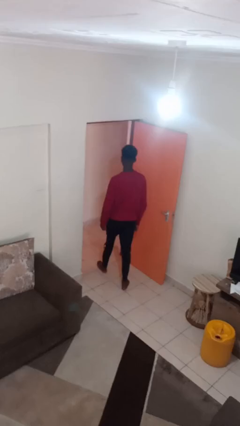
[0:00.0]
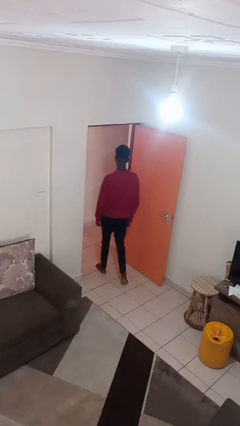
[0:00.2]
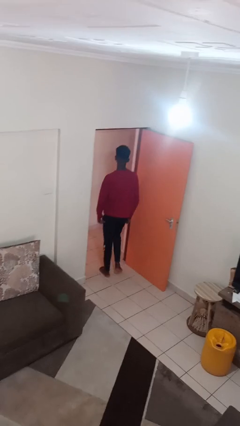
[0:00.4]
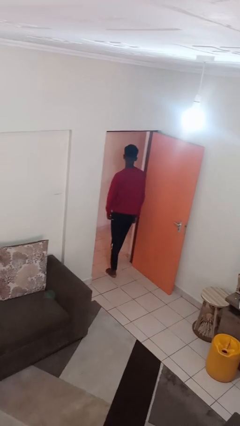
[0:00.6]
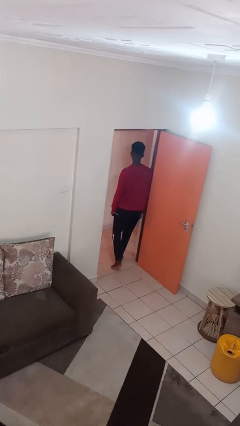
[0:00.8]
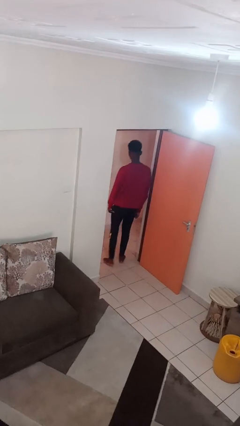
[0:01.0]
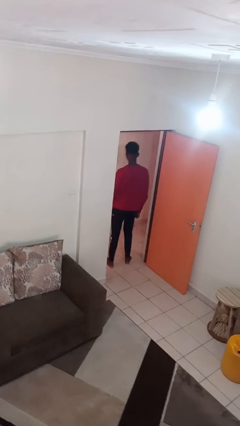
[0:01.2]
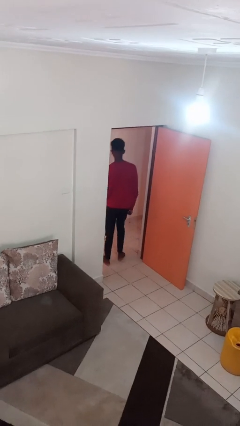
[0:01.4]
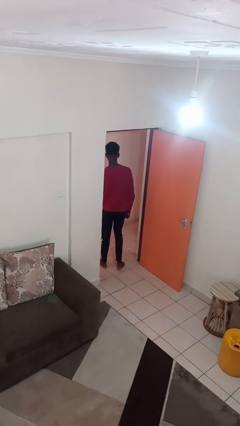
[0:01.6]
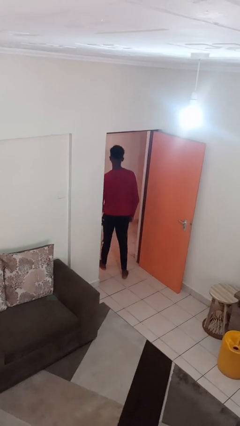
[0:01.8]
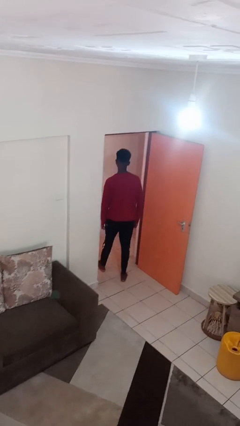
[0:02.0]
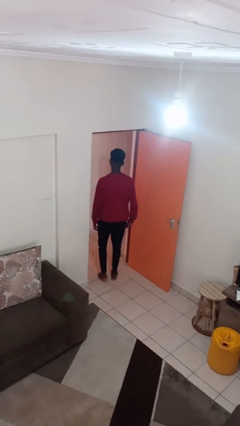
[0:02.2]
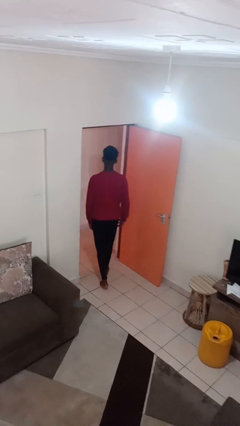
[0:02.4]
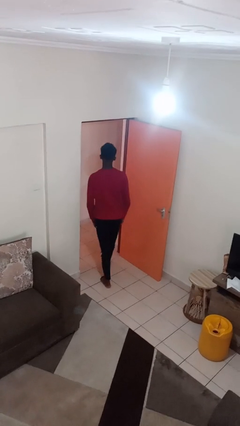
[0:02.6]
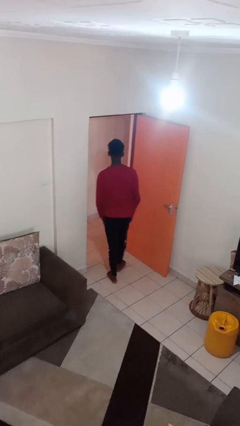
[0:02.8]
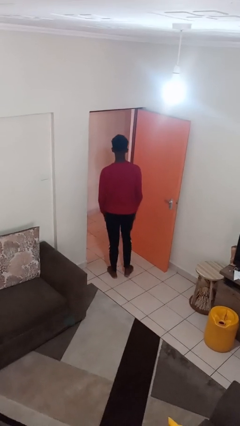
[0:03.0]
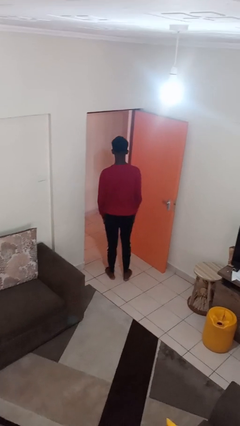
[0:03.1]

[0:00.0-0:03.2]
person bumps into wall

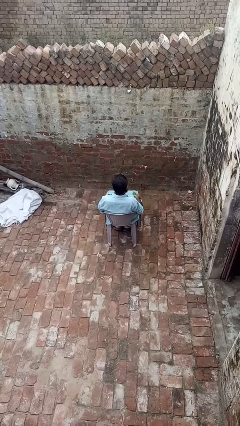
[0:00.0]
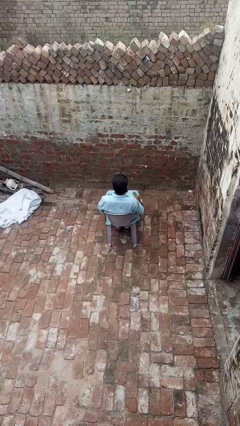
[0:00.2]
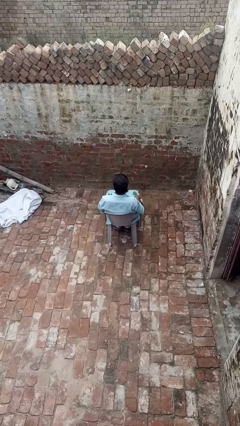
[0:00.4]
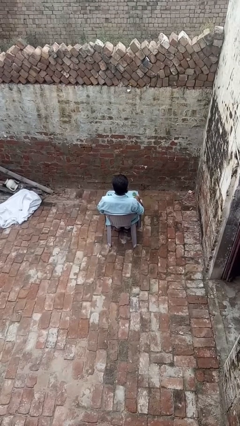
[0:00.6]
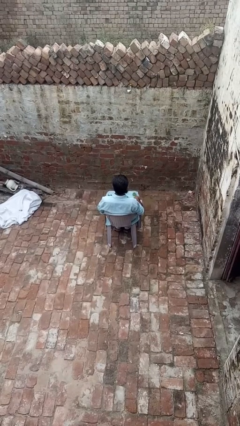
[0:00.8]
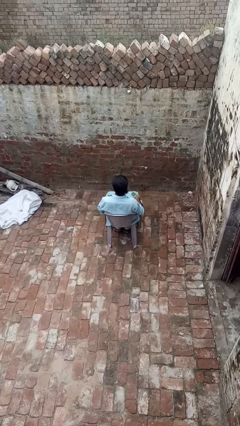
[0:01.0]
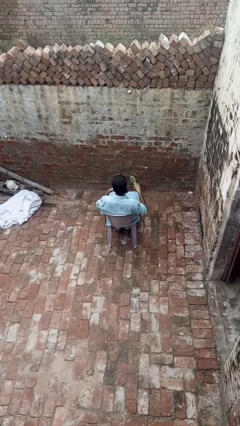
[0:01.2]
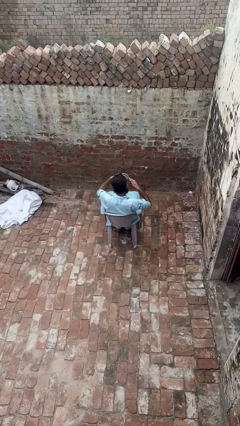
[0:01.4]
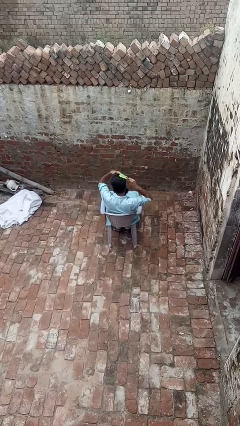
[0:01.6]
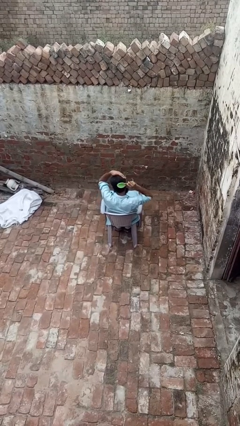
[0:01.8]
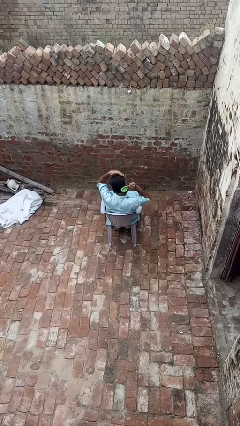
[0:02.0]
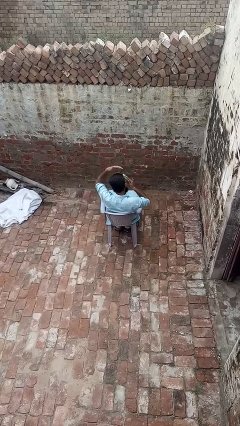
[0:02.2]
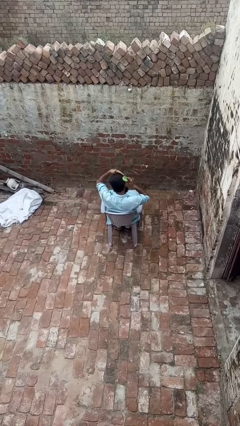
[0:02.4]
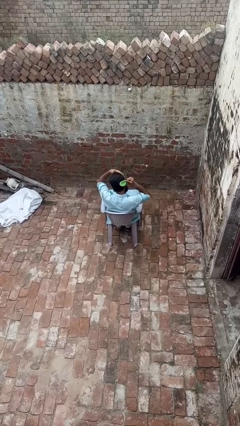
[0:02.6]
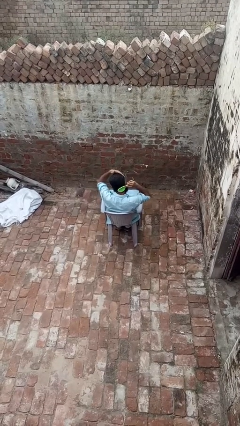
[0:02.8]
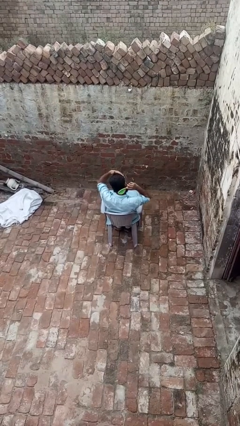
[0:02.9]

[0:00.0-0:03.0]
person brushes hair

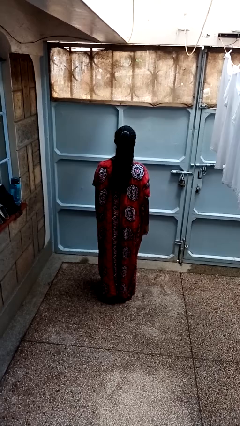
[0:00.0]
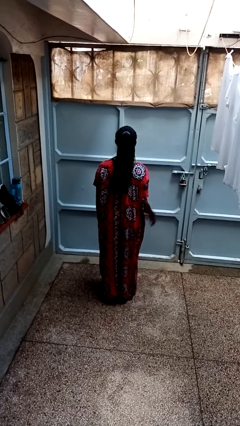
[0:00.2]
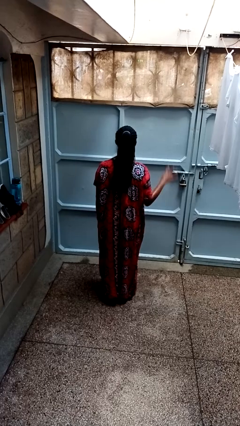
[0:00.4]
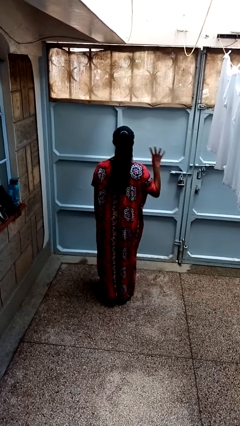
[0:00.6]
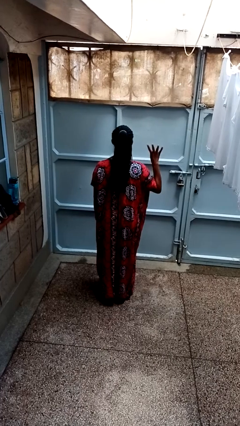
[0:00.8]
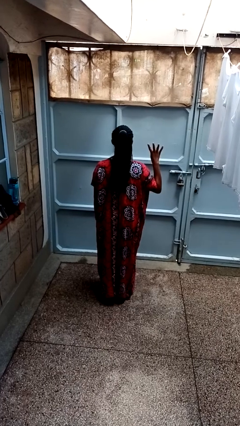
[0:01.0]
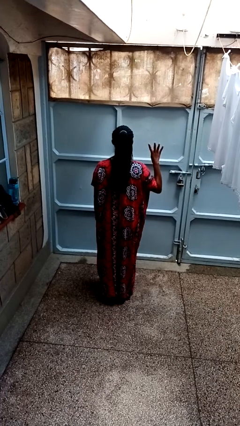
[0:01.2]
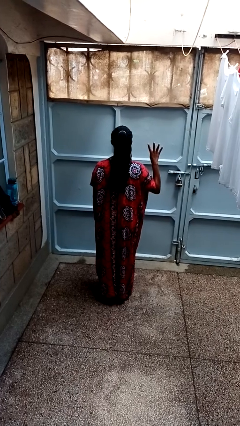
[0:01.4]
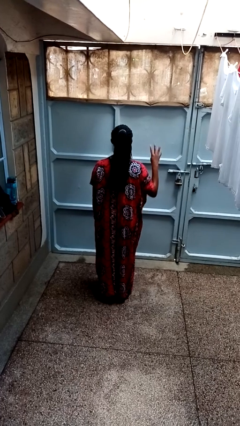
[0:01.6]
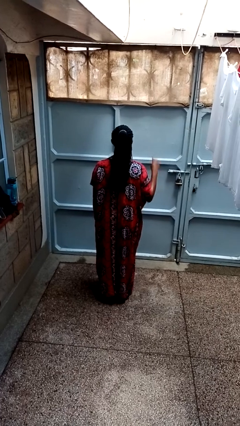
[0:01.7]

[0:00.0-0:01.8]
person gestures number four

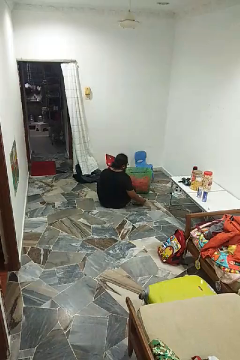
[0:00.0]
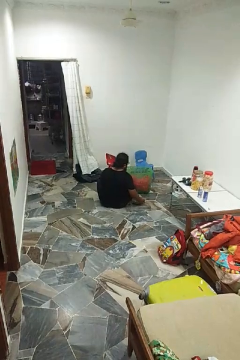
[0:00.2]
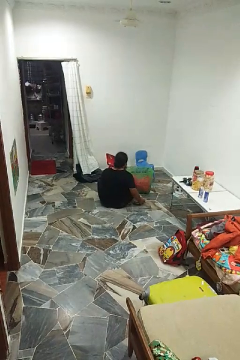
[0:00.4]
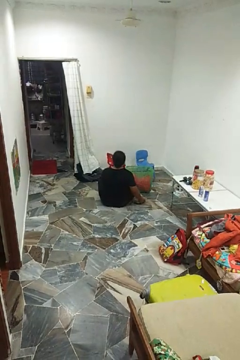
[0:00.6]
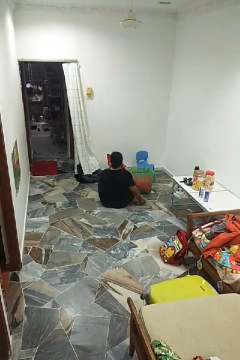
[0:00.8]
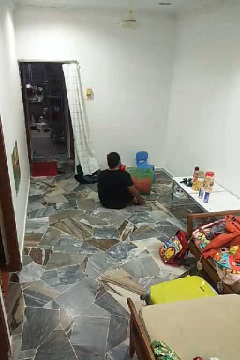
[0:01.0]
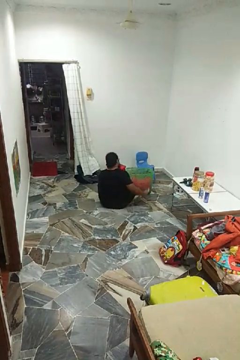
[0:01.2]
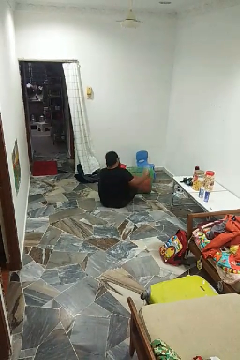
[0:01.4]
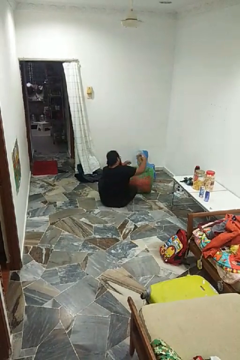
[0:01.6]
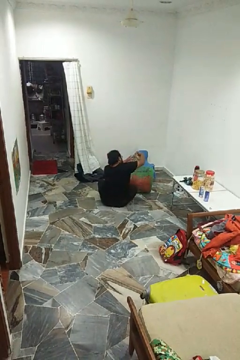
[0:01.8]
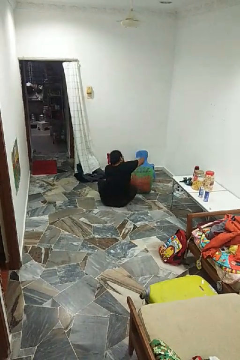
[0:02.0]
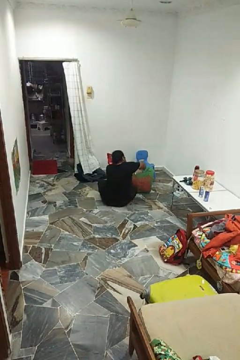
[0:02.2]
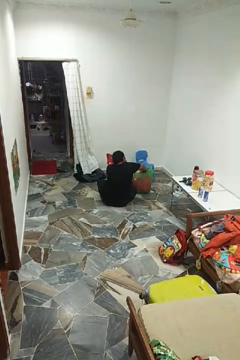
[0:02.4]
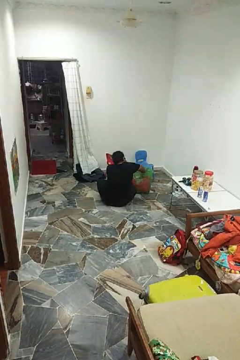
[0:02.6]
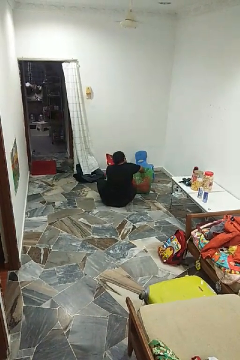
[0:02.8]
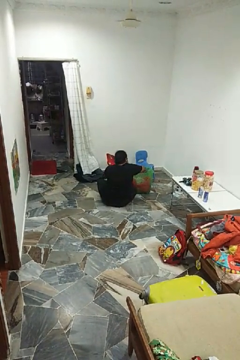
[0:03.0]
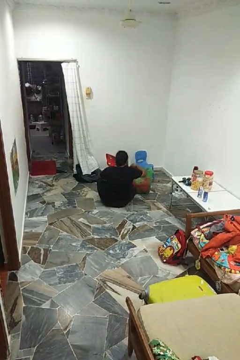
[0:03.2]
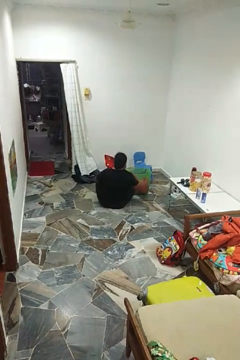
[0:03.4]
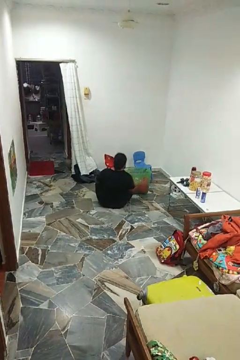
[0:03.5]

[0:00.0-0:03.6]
person puts object into basket

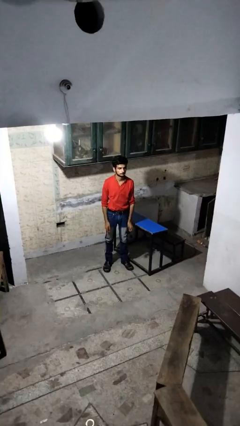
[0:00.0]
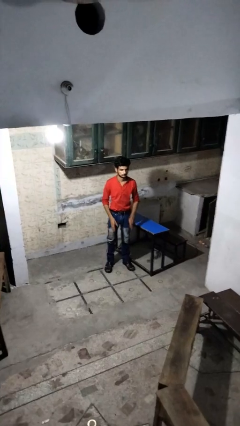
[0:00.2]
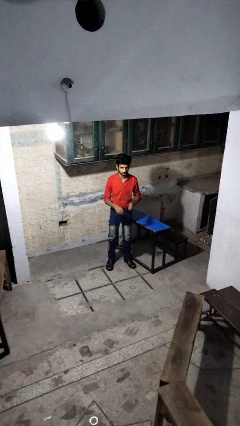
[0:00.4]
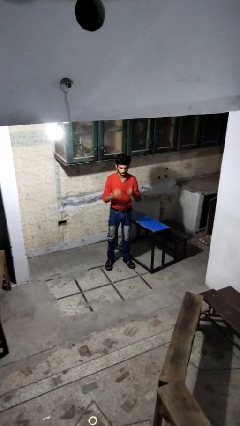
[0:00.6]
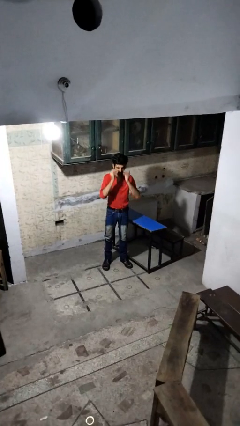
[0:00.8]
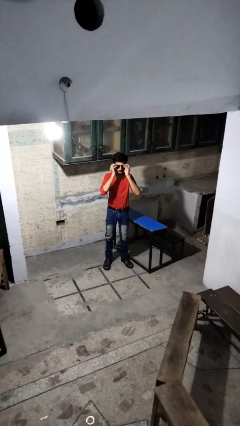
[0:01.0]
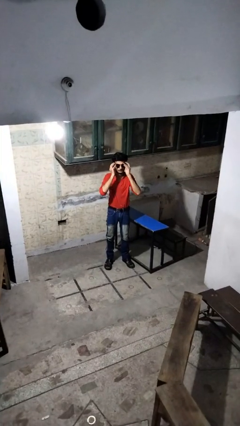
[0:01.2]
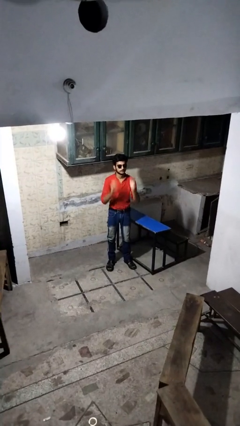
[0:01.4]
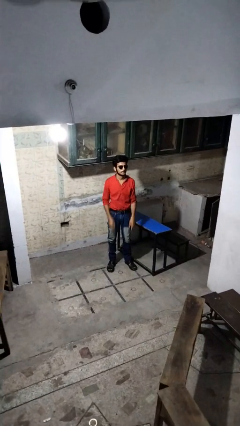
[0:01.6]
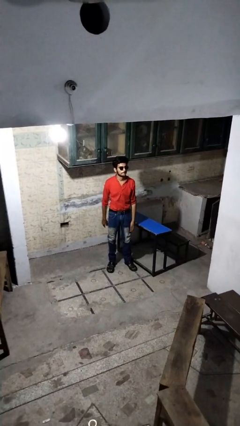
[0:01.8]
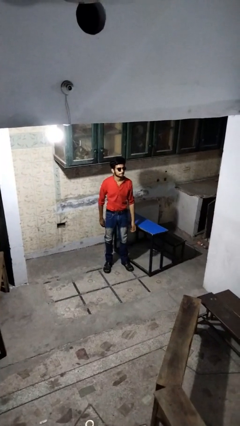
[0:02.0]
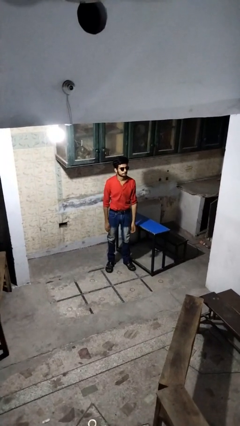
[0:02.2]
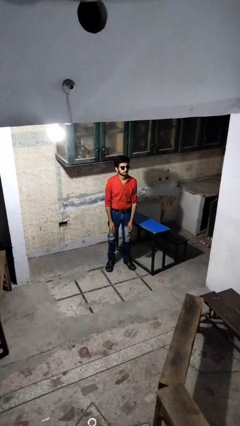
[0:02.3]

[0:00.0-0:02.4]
person puts on sunglasses

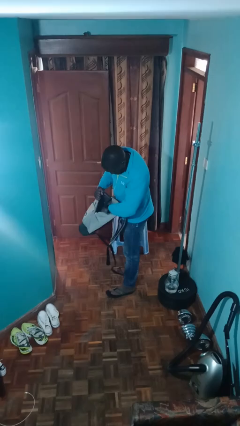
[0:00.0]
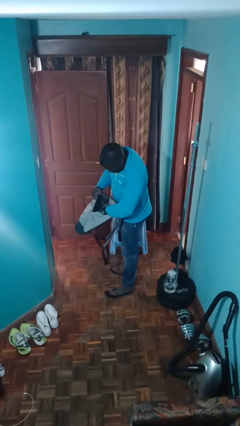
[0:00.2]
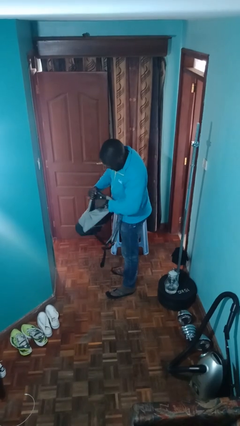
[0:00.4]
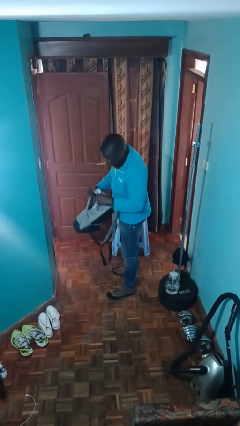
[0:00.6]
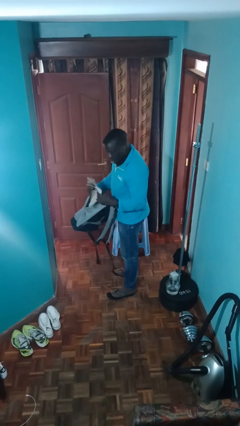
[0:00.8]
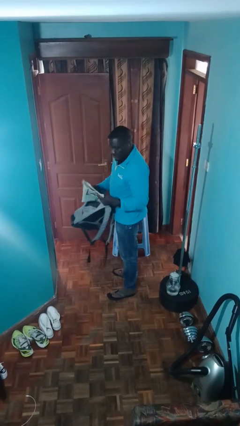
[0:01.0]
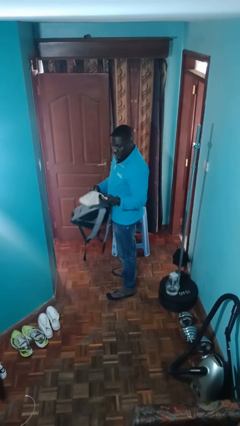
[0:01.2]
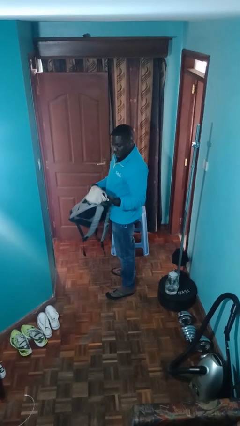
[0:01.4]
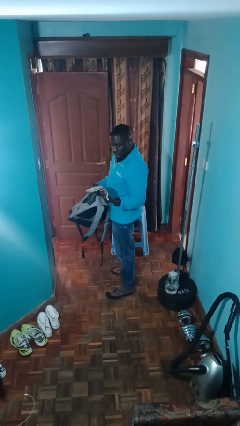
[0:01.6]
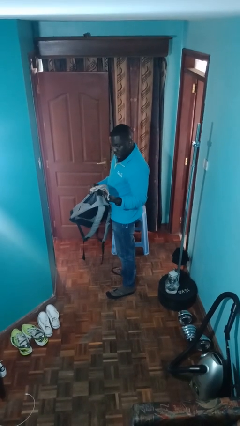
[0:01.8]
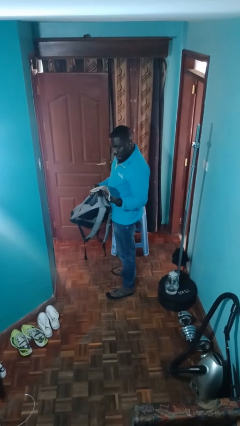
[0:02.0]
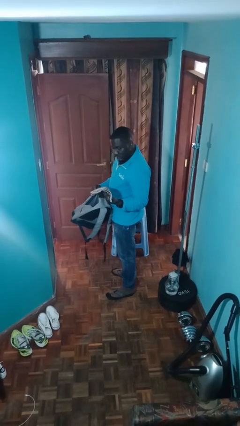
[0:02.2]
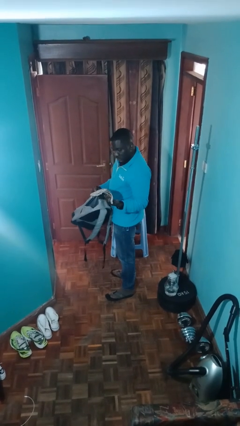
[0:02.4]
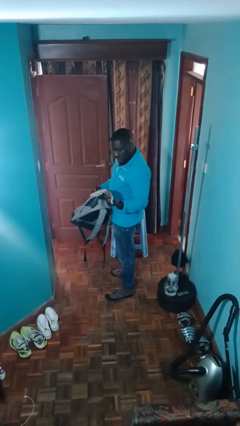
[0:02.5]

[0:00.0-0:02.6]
person takes object from backpack

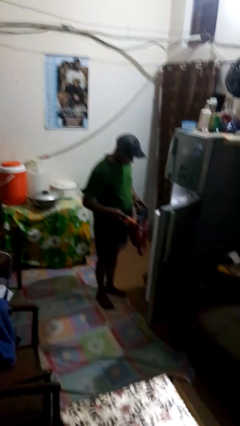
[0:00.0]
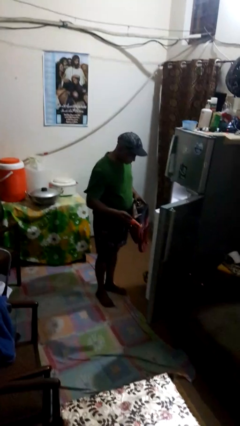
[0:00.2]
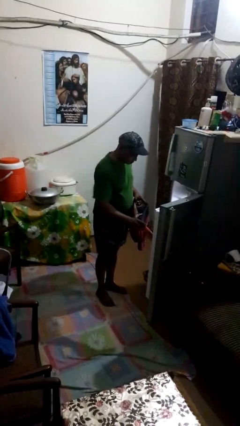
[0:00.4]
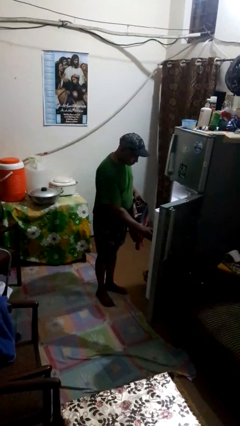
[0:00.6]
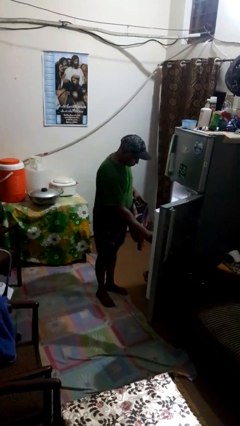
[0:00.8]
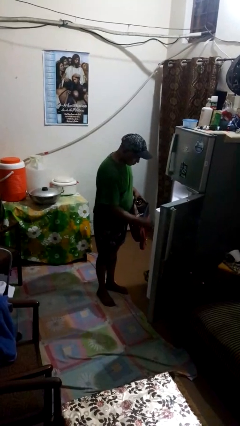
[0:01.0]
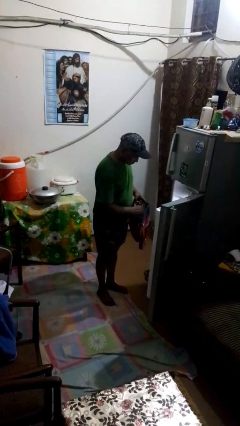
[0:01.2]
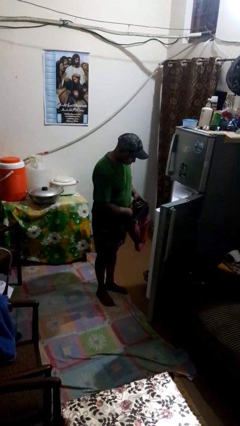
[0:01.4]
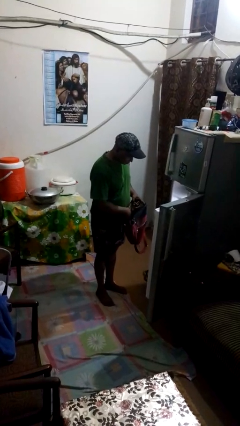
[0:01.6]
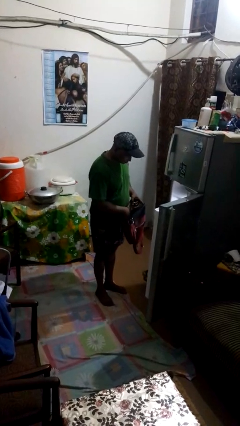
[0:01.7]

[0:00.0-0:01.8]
person loads groceries into refrigerator
